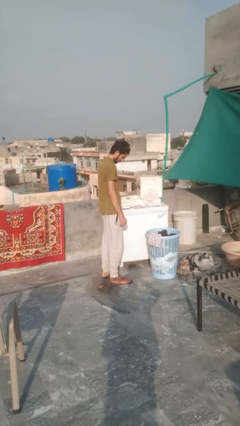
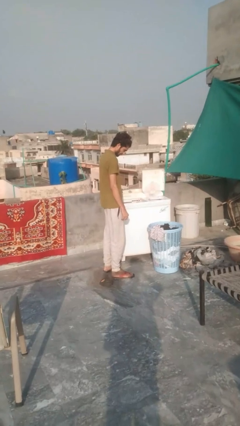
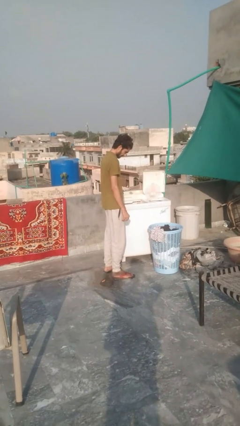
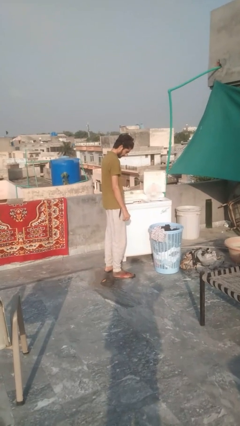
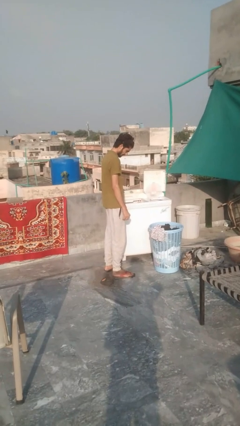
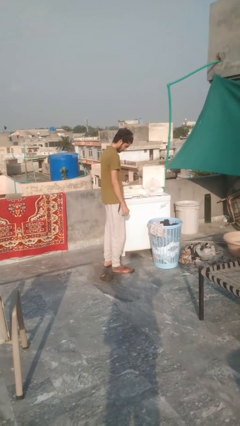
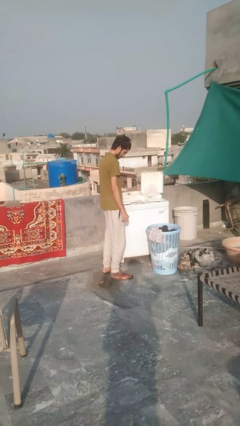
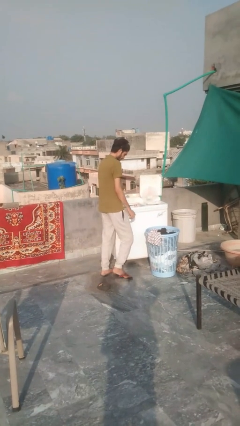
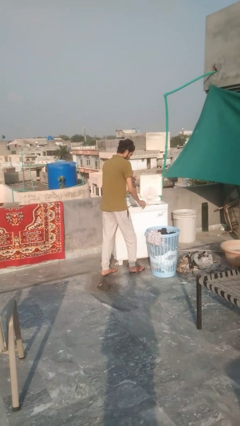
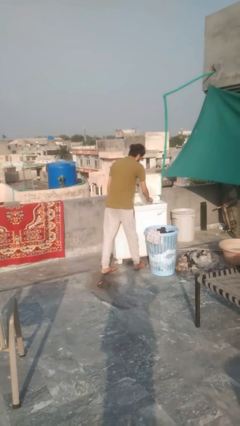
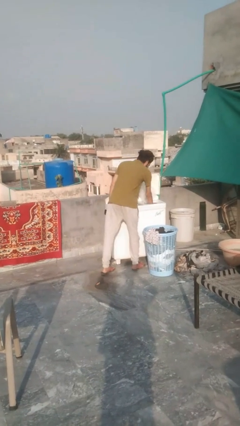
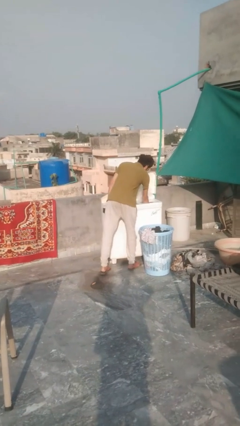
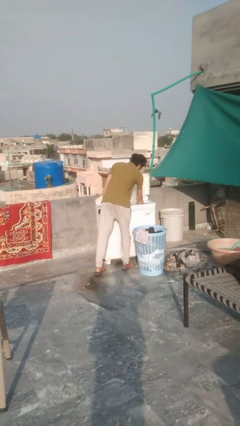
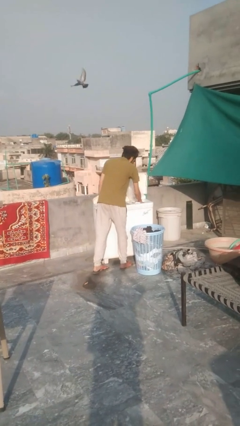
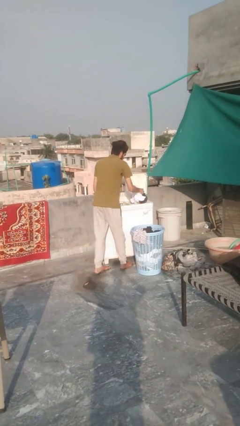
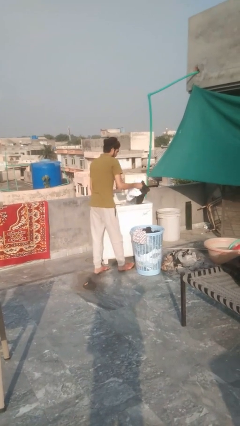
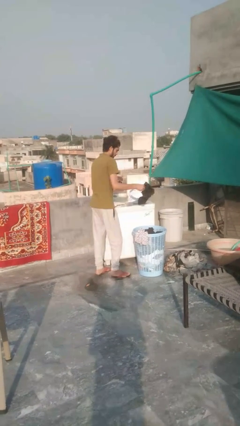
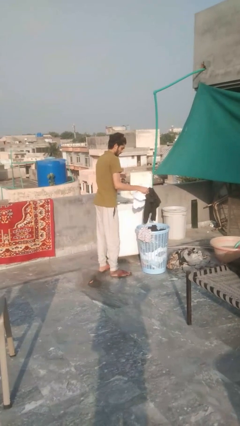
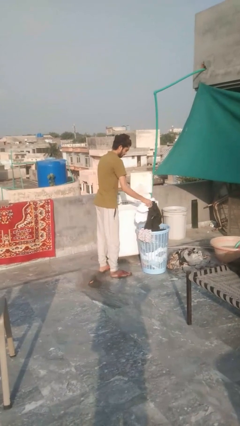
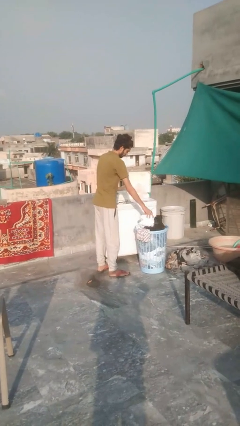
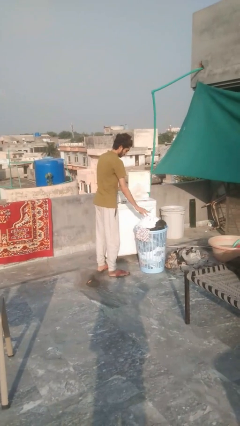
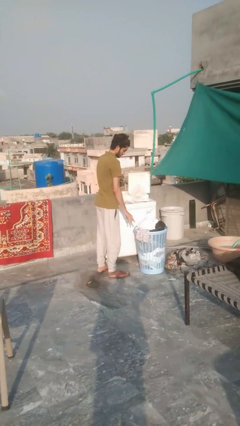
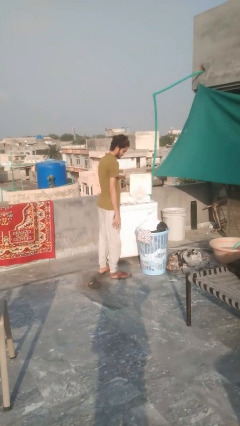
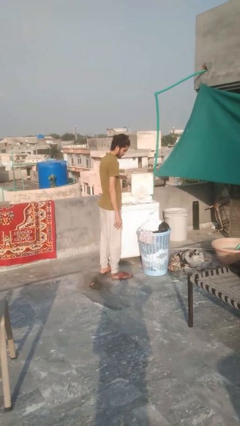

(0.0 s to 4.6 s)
person unloads clotheswasher

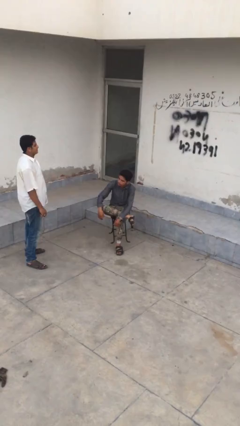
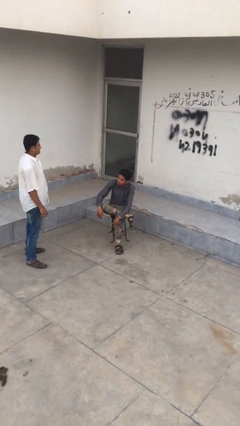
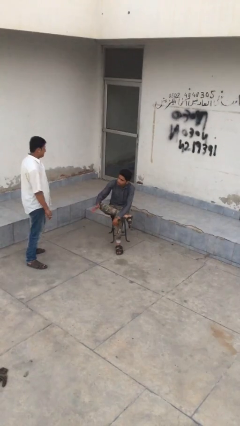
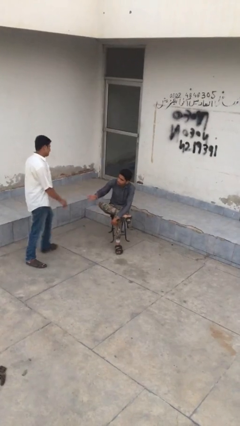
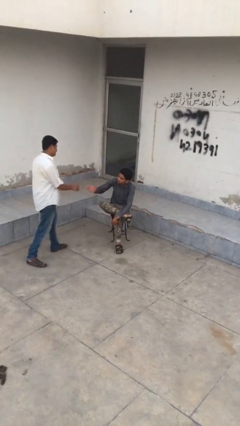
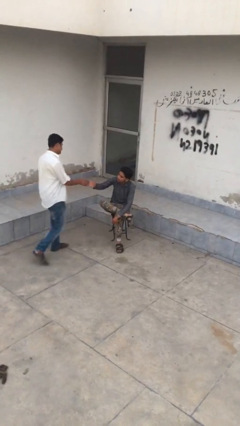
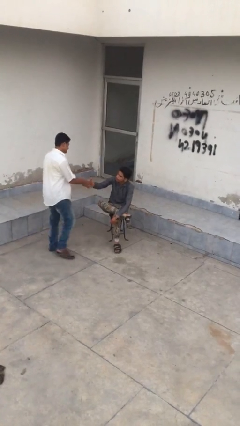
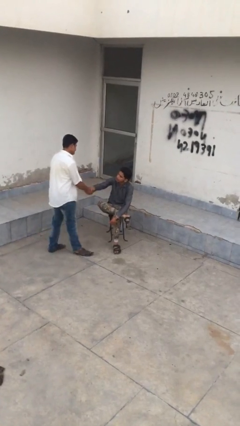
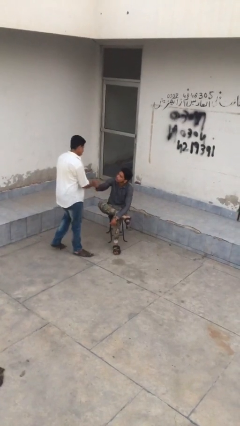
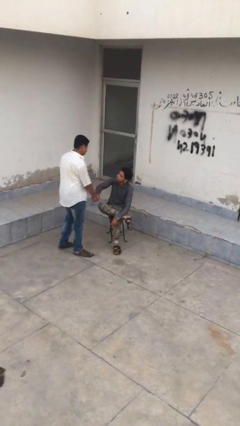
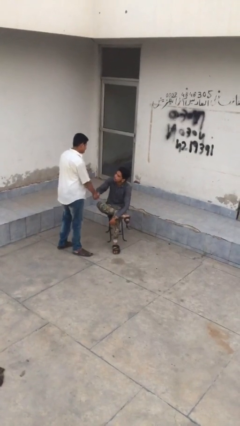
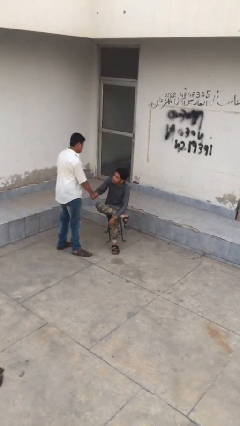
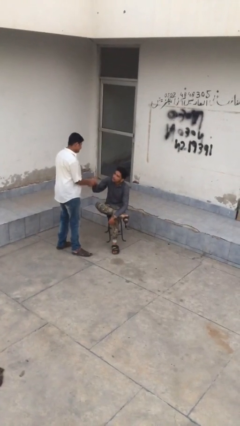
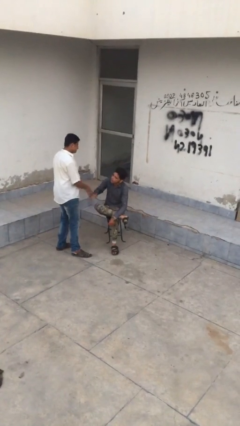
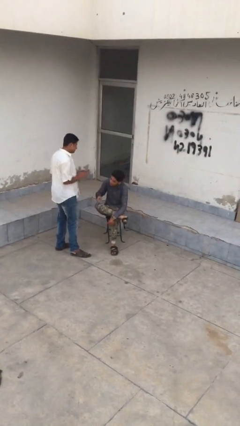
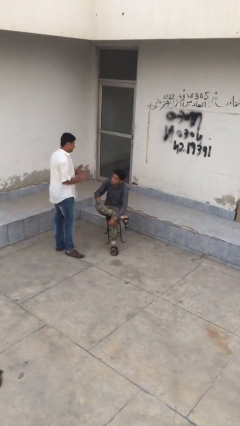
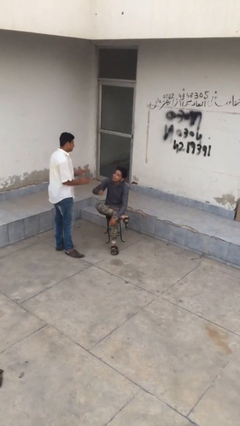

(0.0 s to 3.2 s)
person shakes hand

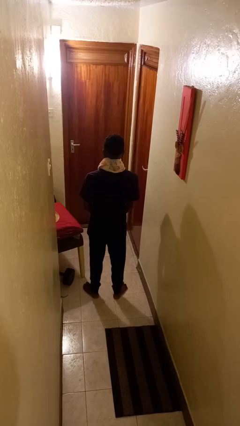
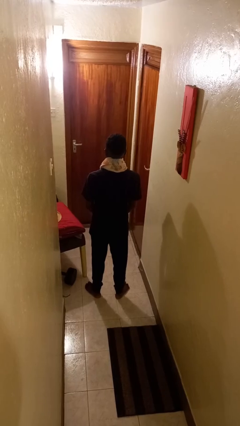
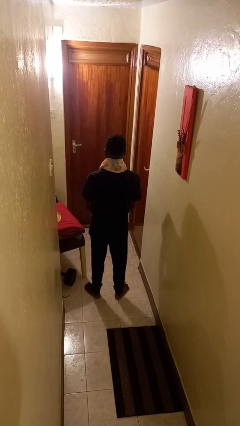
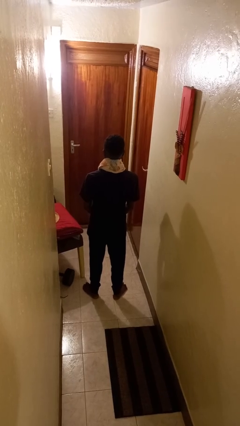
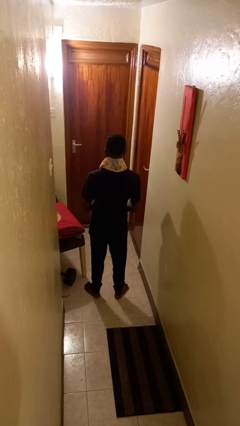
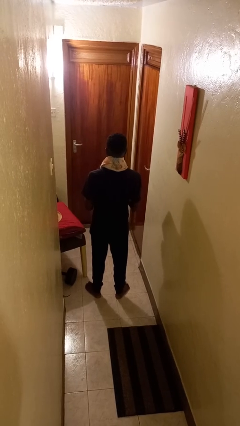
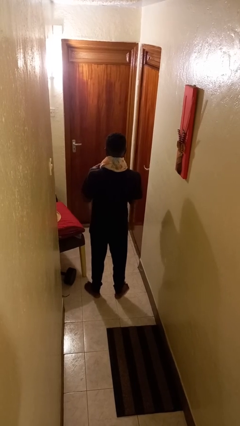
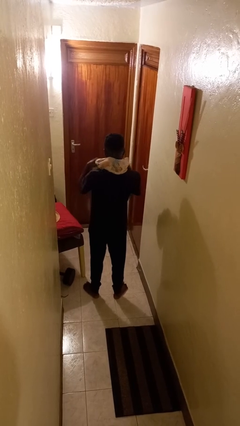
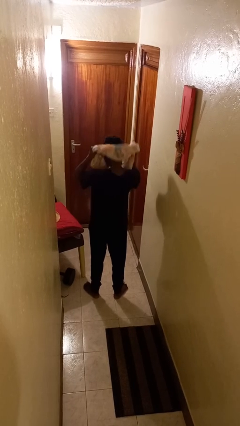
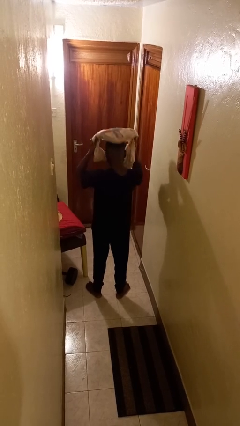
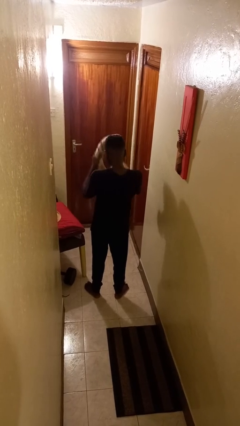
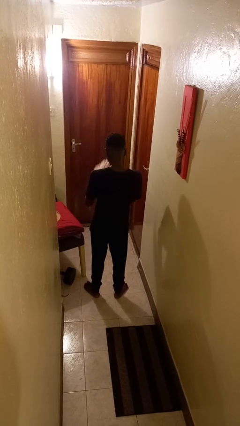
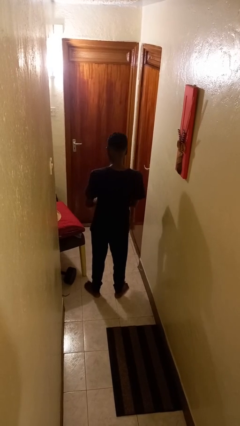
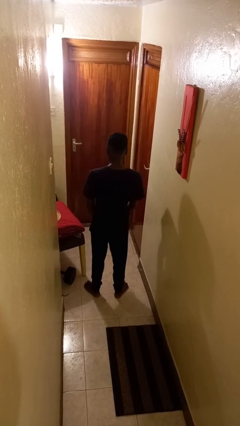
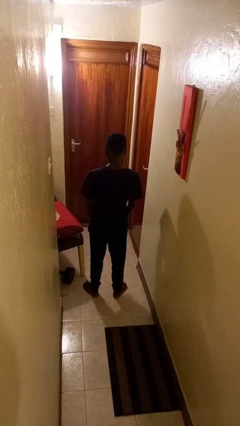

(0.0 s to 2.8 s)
person takes off scarf

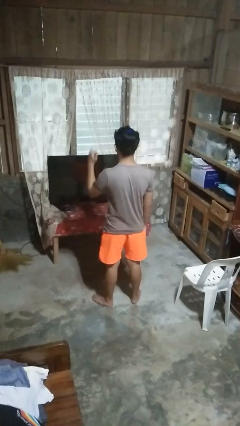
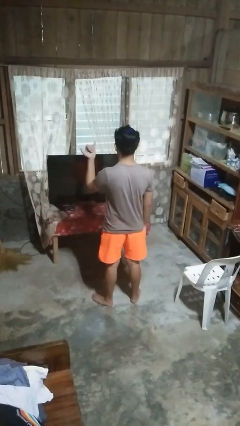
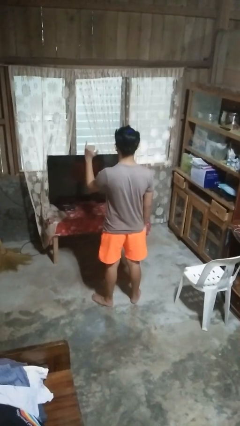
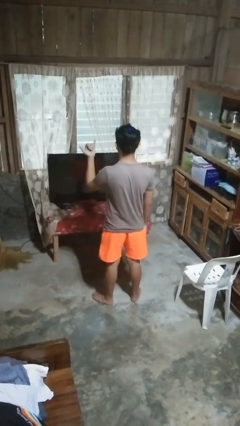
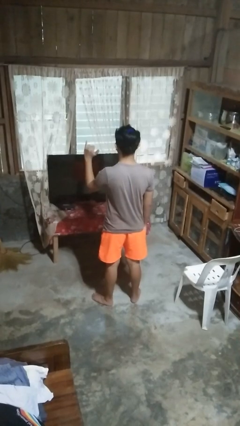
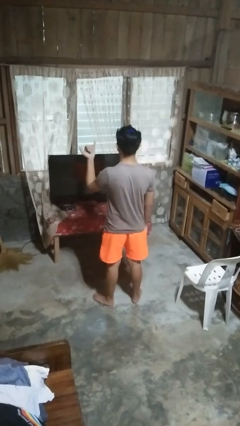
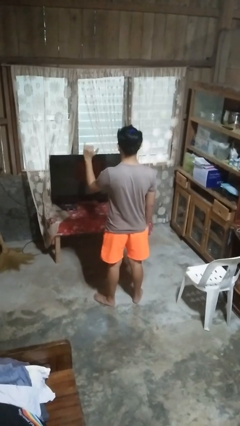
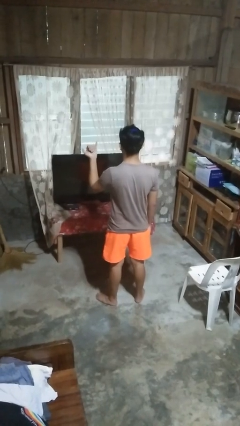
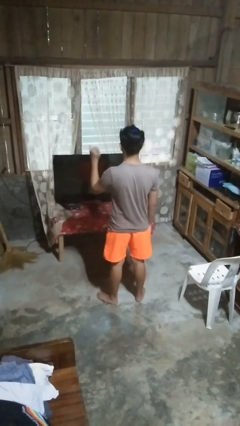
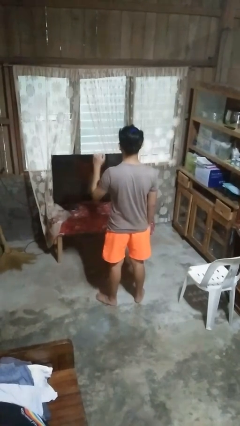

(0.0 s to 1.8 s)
person gestures hang loose

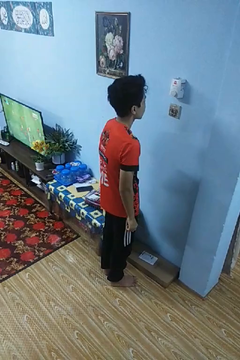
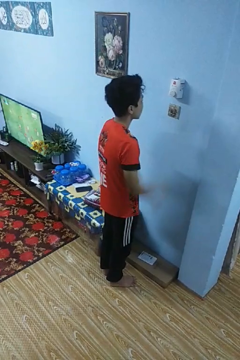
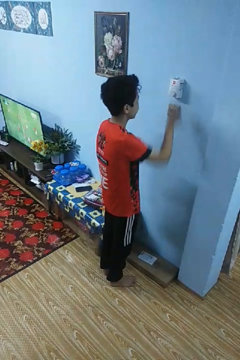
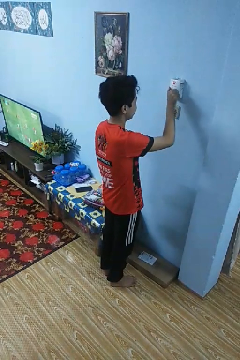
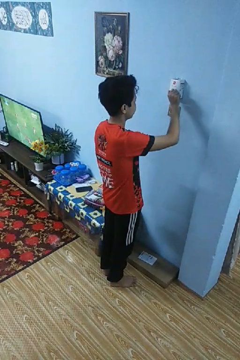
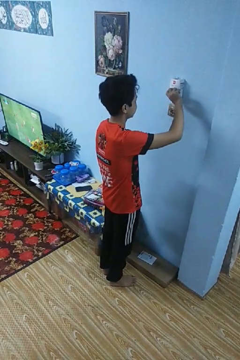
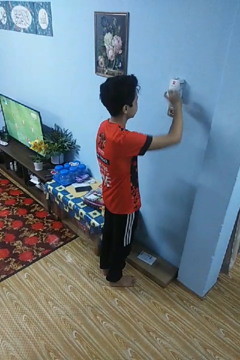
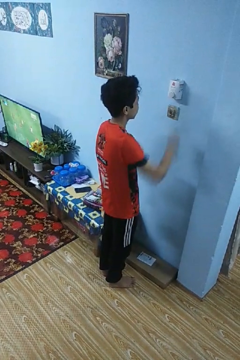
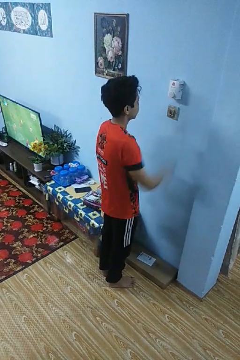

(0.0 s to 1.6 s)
person adjusts thermostat

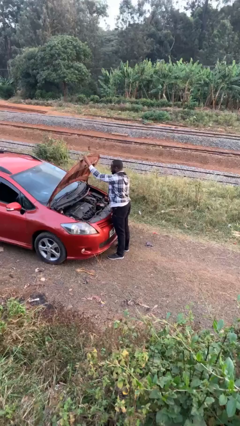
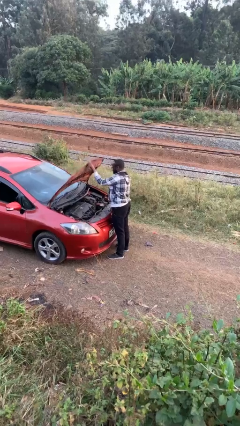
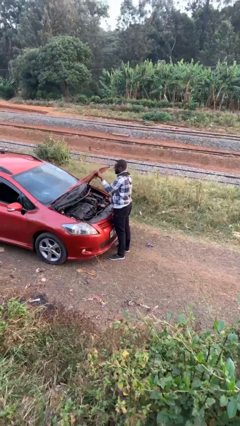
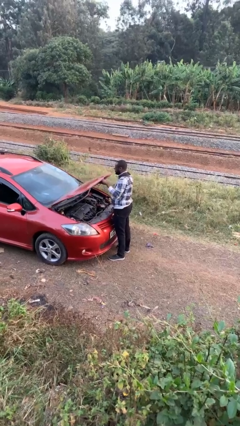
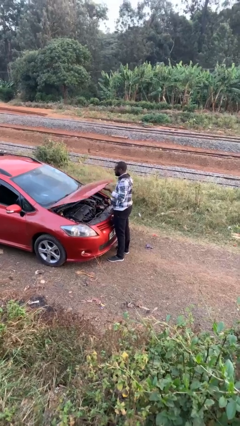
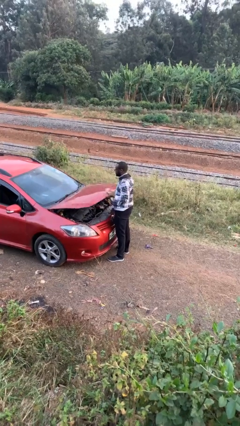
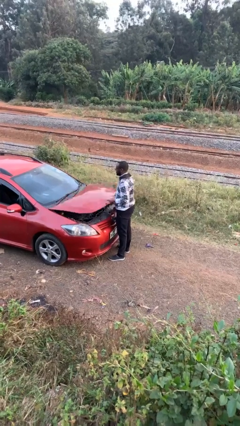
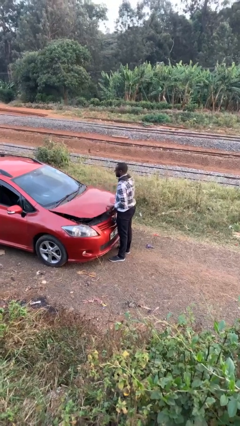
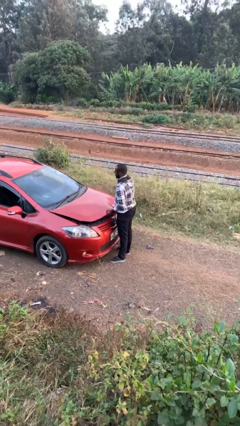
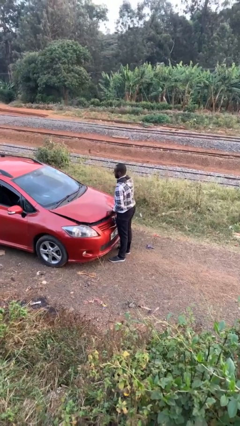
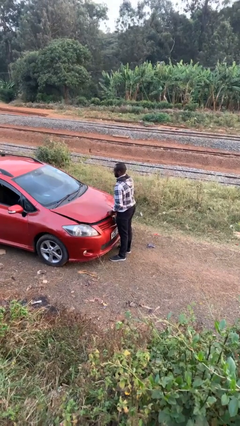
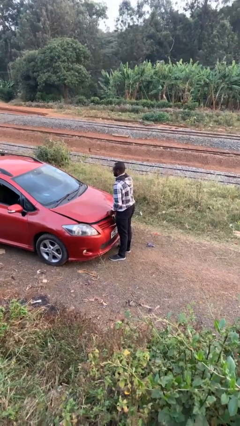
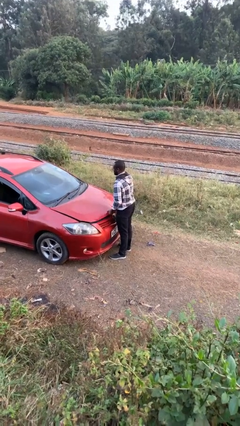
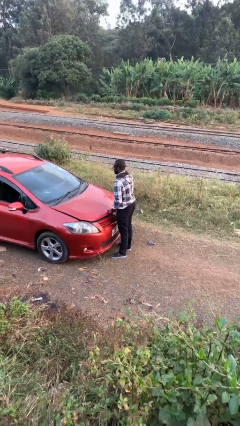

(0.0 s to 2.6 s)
person closes car hood

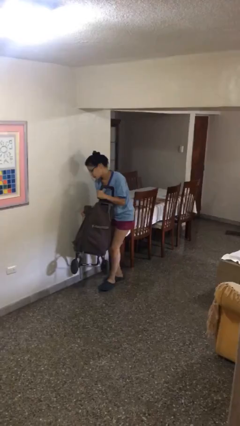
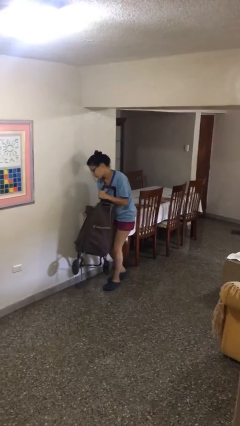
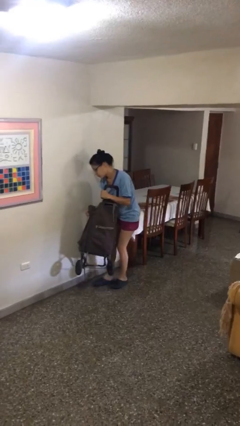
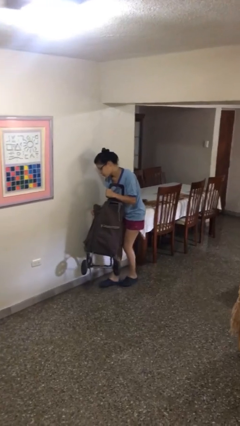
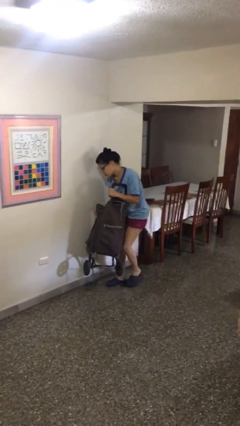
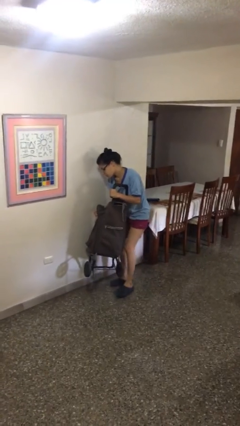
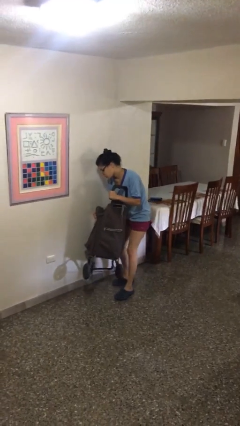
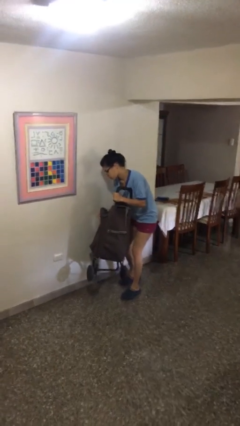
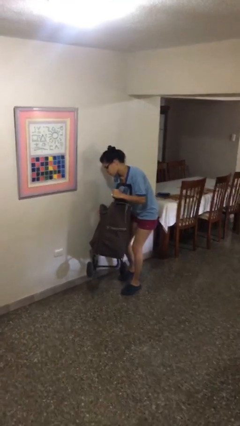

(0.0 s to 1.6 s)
person carries heavy object
